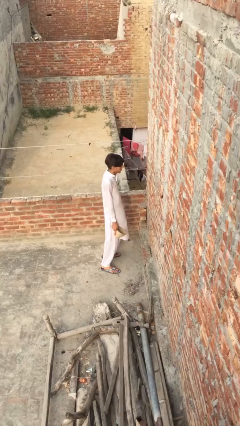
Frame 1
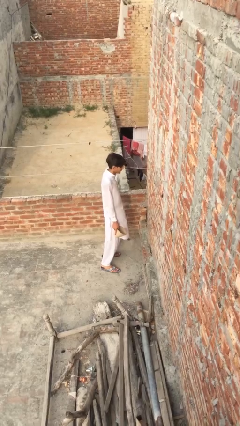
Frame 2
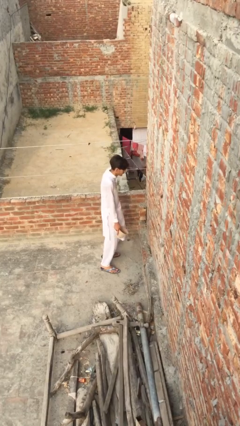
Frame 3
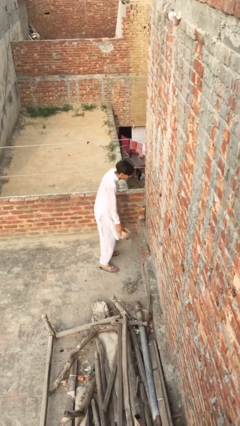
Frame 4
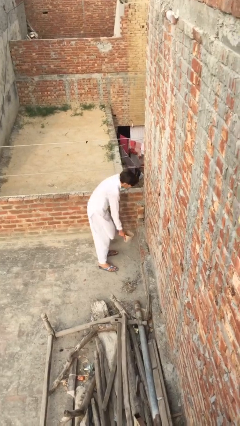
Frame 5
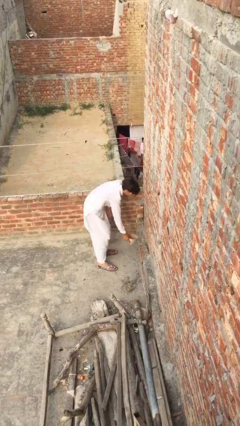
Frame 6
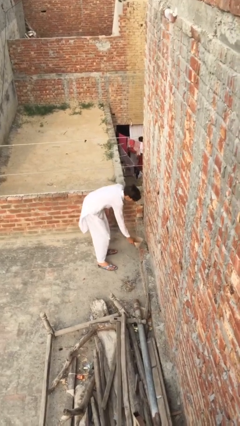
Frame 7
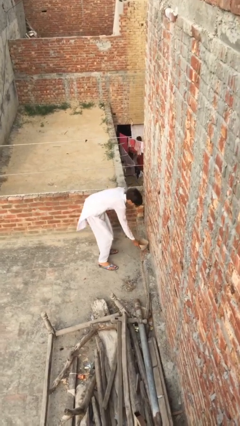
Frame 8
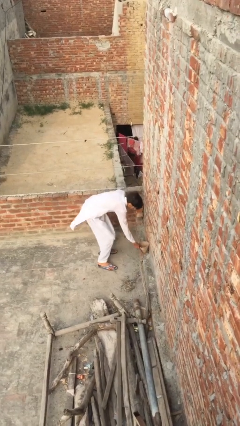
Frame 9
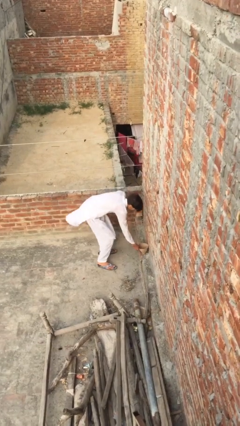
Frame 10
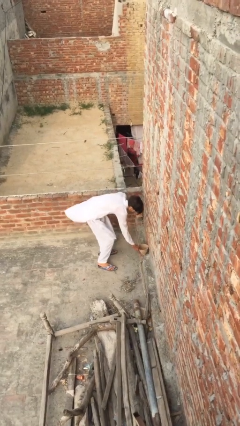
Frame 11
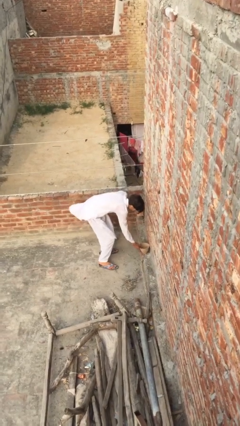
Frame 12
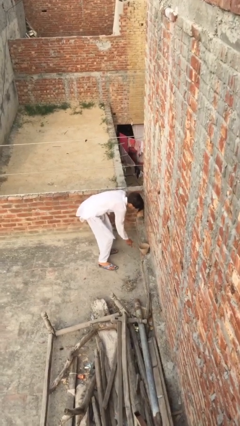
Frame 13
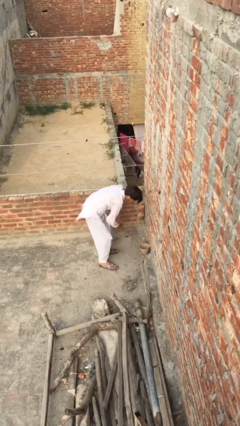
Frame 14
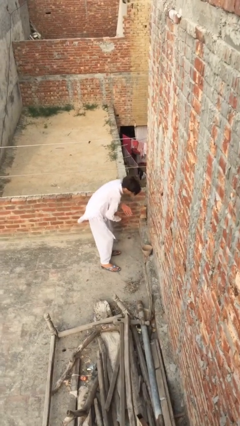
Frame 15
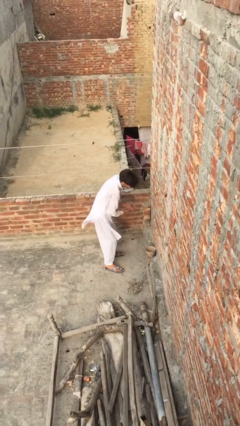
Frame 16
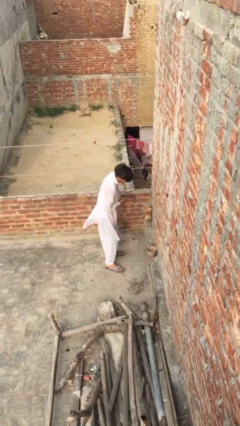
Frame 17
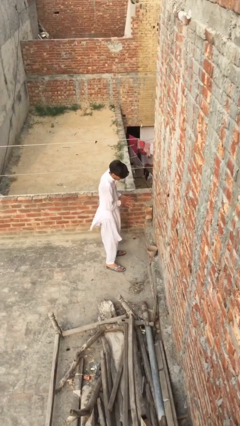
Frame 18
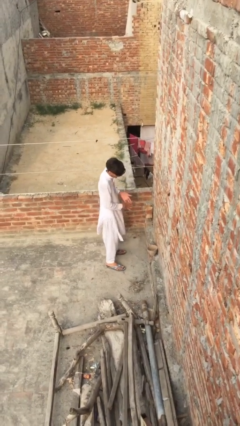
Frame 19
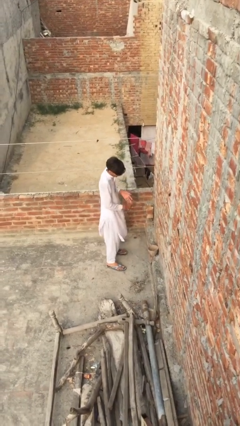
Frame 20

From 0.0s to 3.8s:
person puts down object on floor

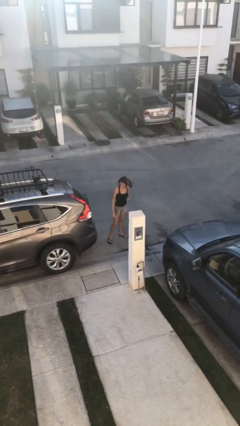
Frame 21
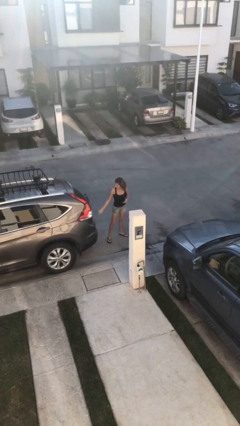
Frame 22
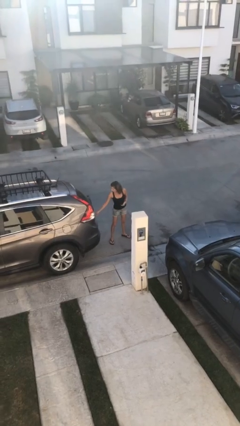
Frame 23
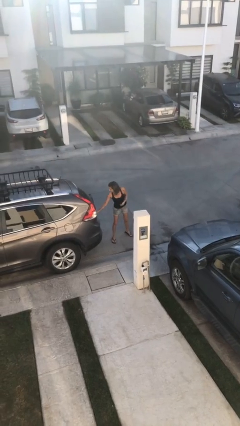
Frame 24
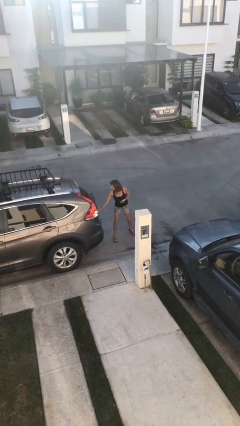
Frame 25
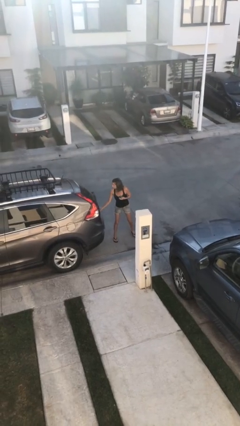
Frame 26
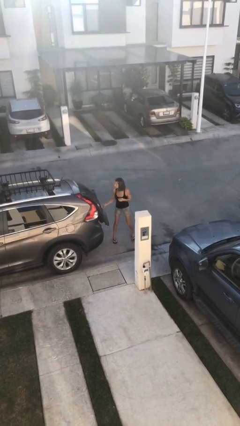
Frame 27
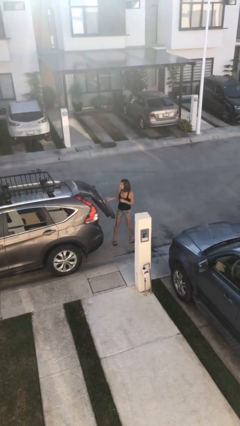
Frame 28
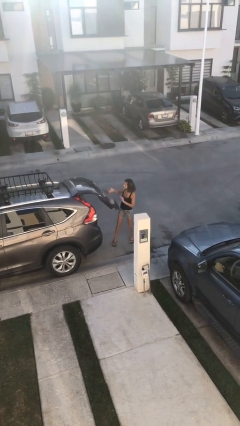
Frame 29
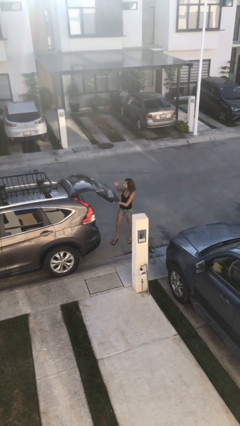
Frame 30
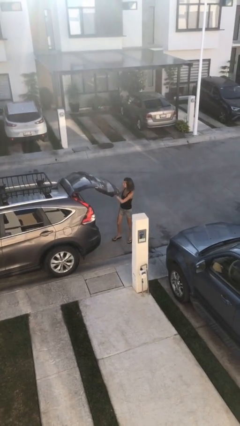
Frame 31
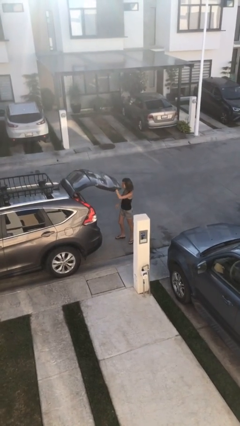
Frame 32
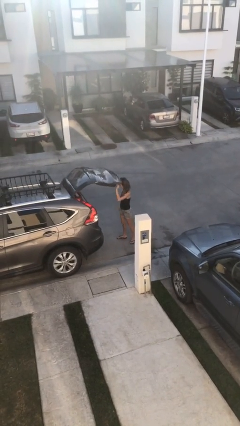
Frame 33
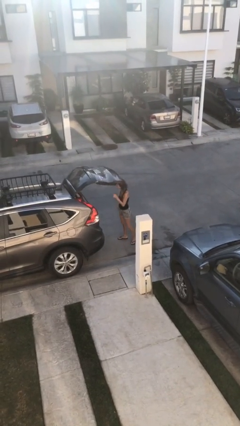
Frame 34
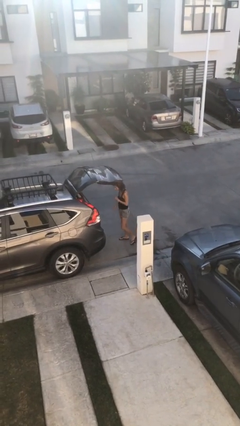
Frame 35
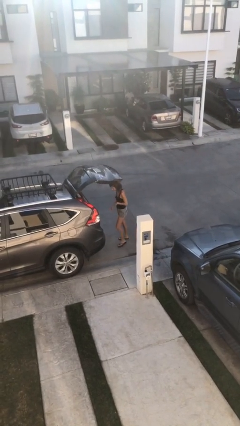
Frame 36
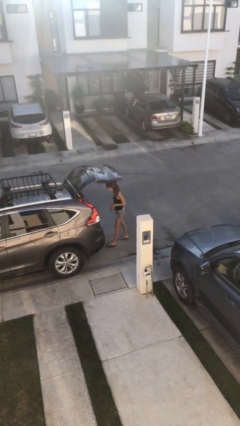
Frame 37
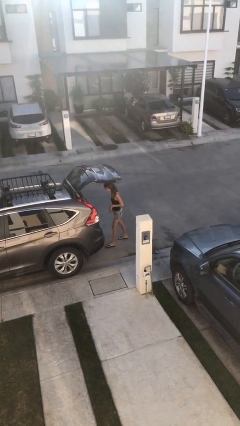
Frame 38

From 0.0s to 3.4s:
person opens car trunk

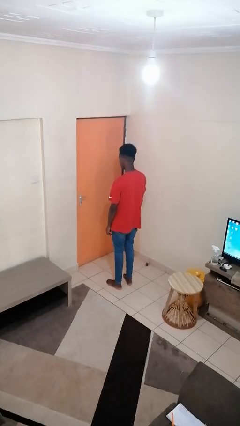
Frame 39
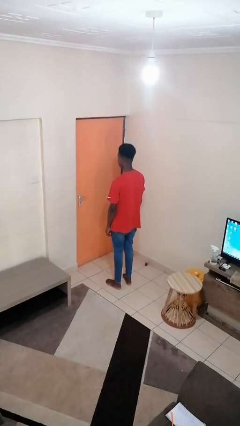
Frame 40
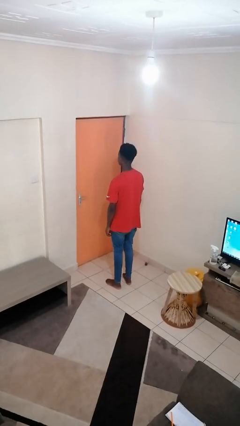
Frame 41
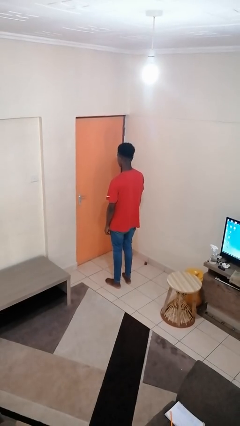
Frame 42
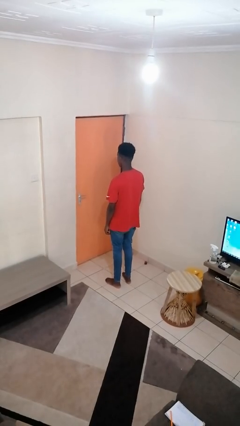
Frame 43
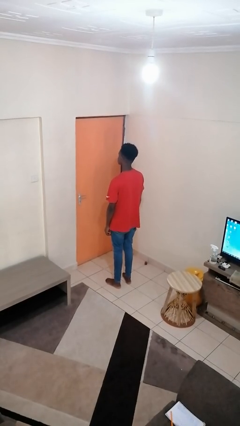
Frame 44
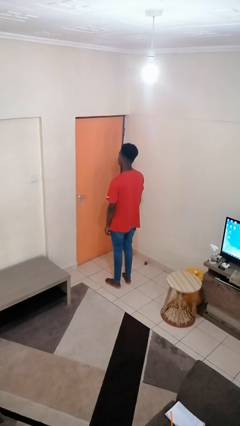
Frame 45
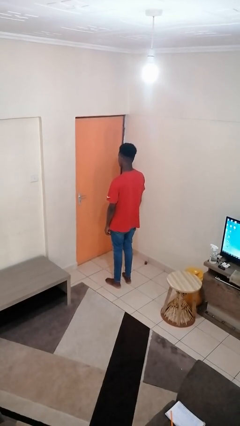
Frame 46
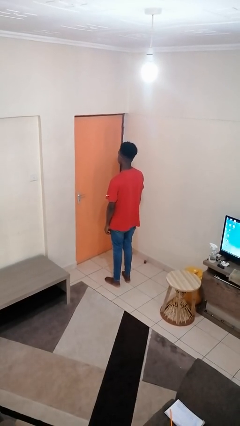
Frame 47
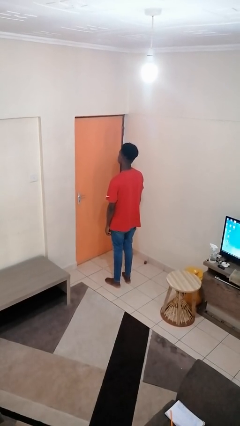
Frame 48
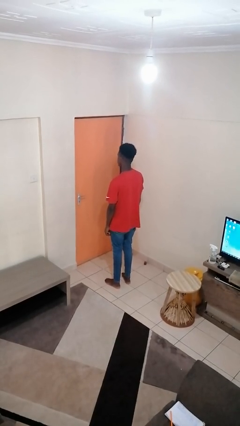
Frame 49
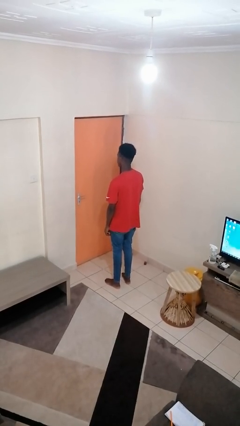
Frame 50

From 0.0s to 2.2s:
person nods head

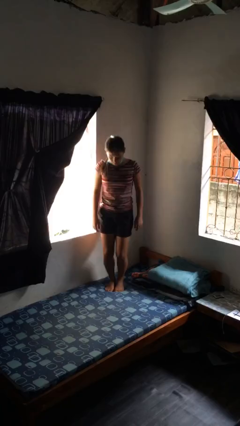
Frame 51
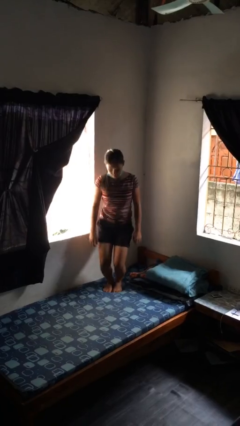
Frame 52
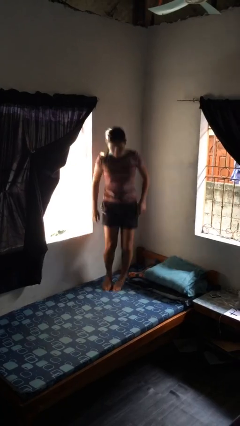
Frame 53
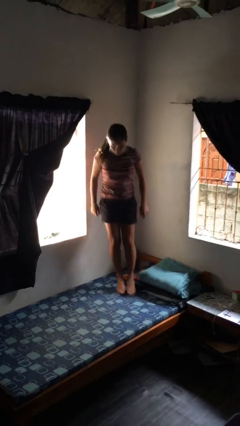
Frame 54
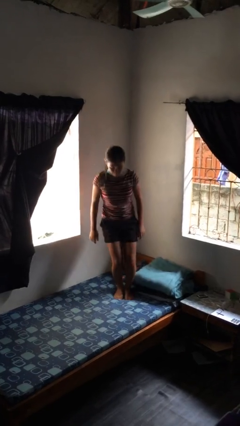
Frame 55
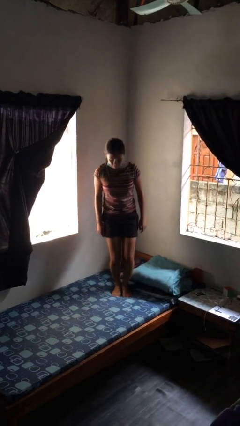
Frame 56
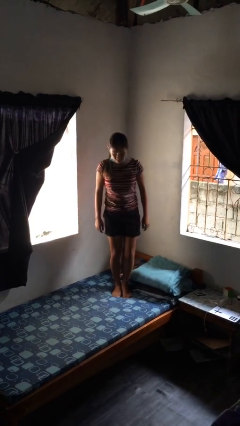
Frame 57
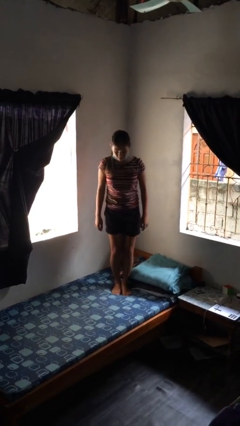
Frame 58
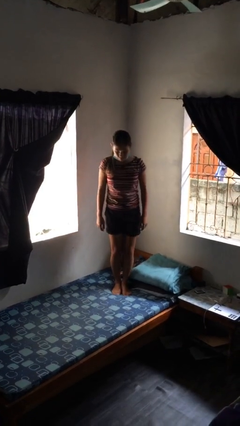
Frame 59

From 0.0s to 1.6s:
person jumps on bed

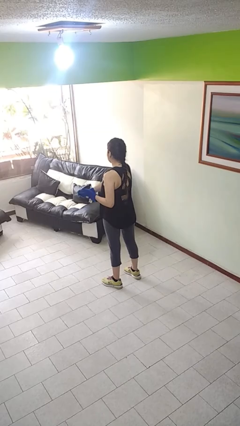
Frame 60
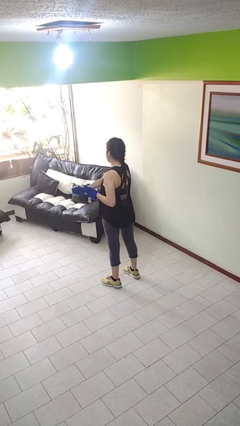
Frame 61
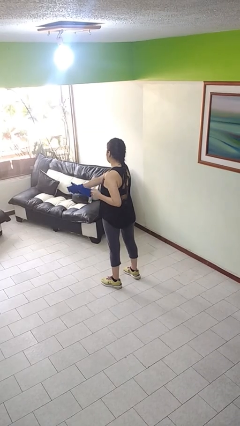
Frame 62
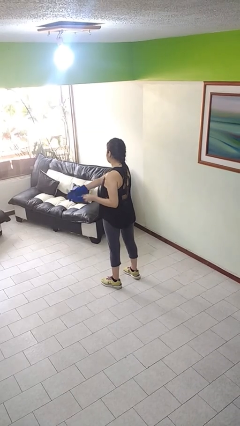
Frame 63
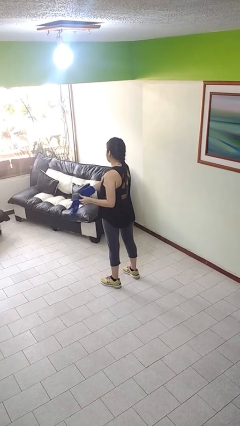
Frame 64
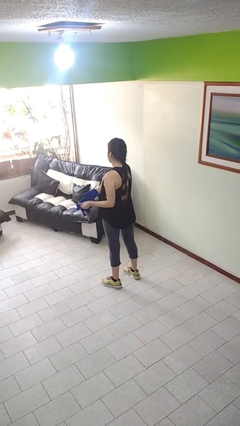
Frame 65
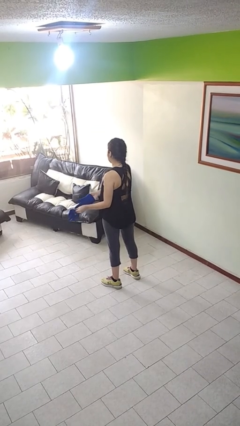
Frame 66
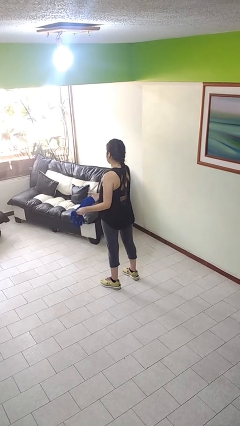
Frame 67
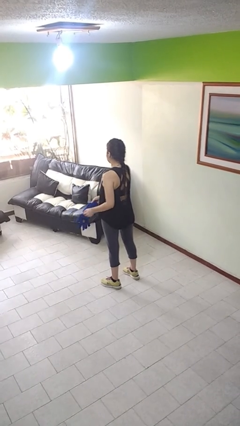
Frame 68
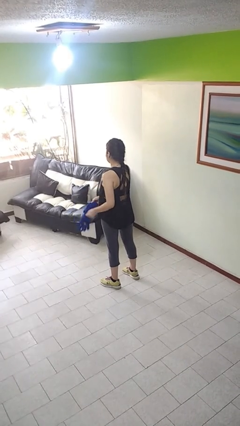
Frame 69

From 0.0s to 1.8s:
person takes off gloves

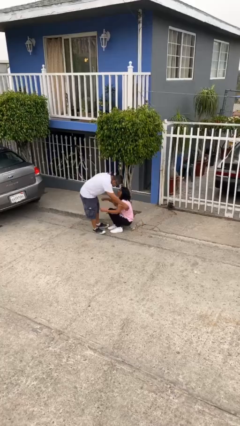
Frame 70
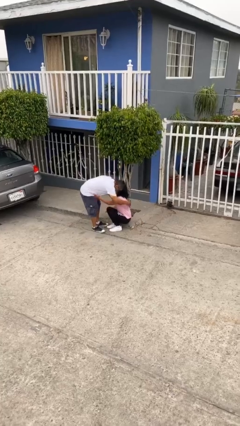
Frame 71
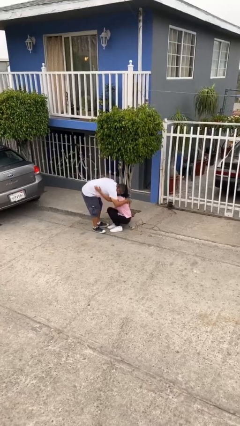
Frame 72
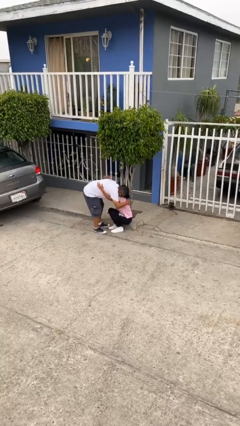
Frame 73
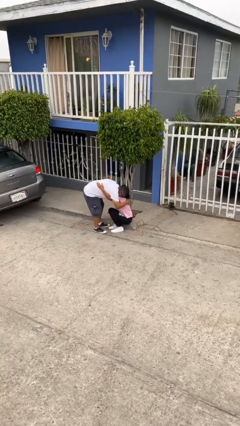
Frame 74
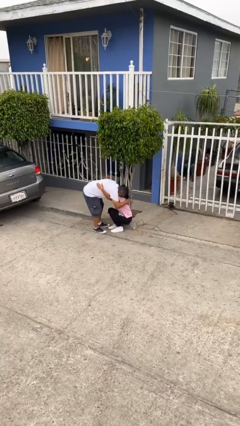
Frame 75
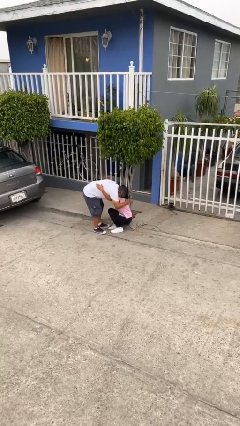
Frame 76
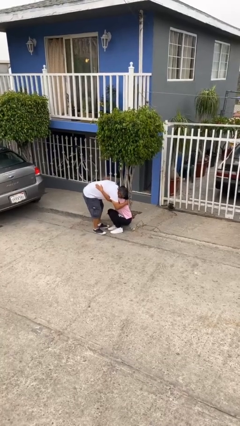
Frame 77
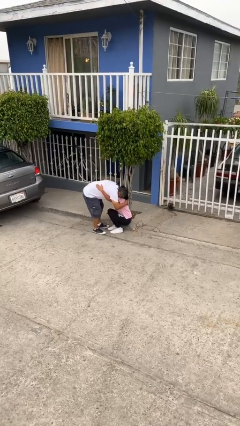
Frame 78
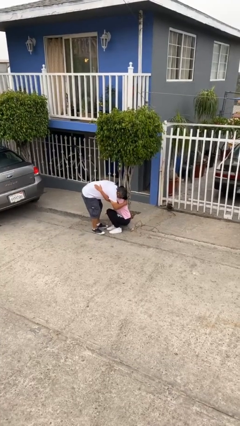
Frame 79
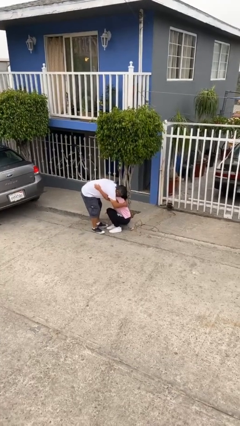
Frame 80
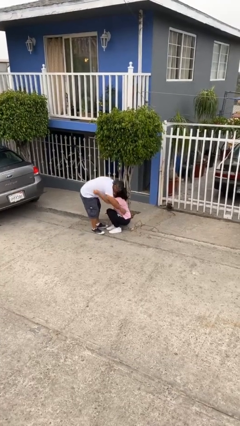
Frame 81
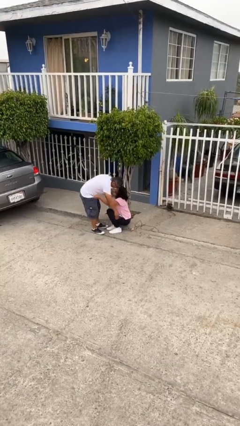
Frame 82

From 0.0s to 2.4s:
person embraces person

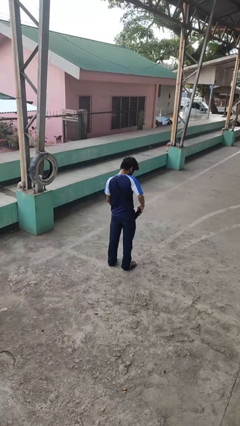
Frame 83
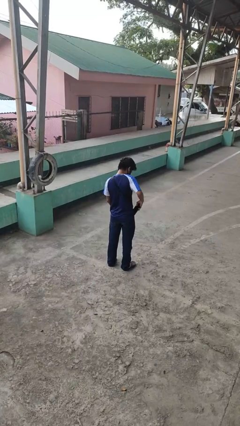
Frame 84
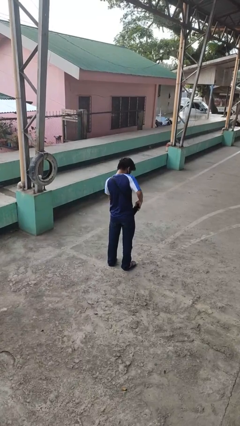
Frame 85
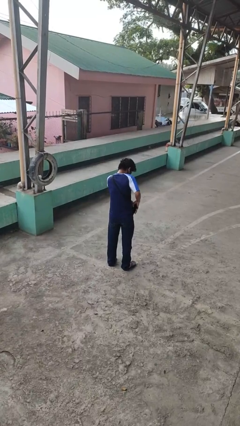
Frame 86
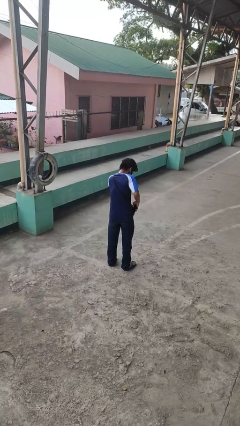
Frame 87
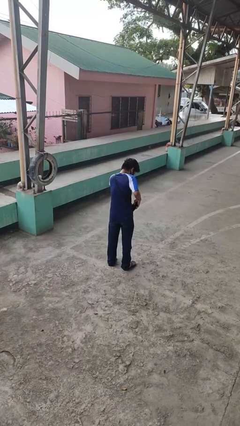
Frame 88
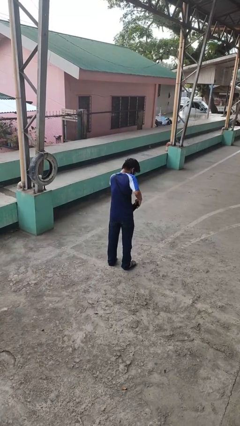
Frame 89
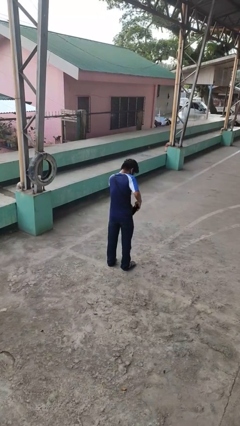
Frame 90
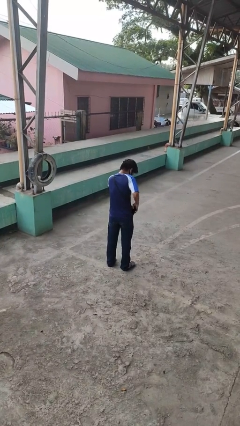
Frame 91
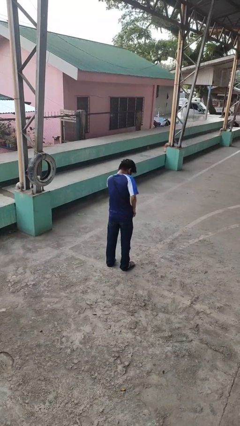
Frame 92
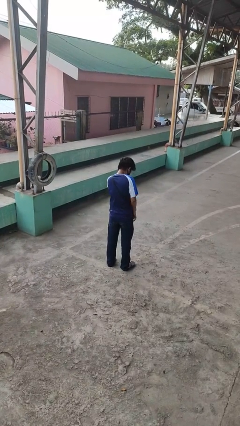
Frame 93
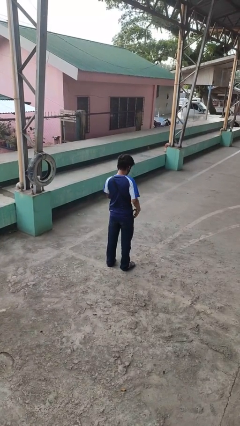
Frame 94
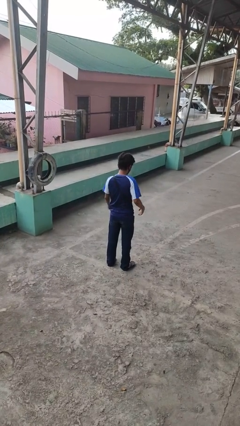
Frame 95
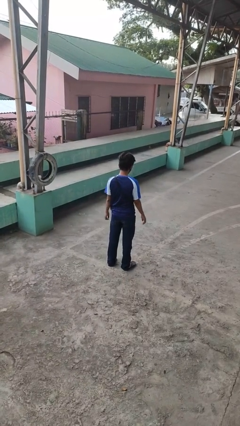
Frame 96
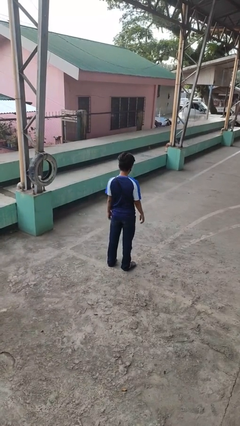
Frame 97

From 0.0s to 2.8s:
person puts phone into pocket
